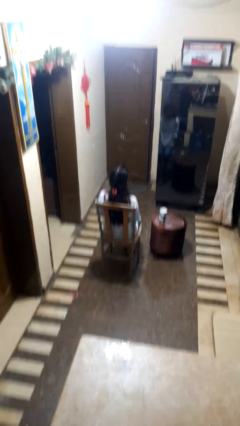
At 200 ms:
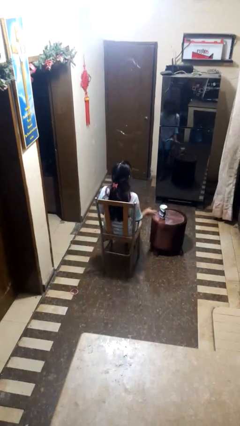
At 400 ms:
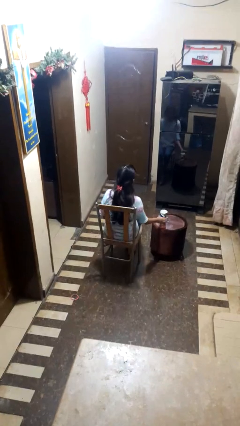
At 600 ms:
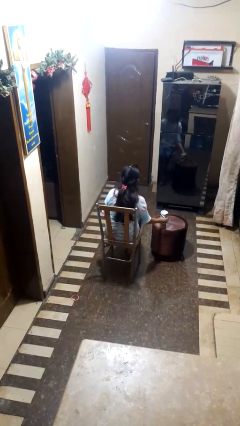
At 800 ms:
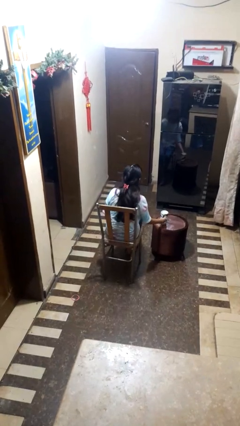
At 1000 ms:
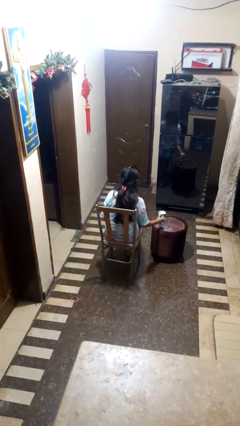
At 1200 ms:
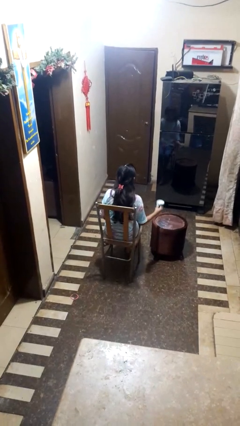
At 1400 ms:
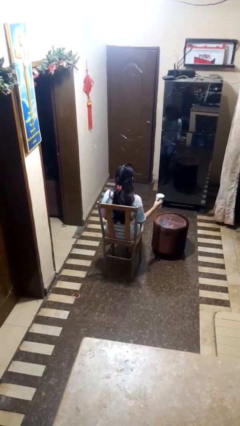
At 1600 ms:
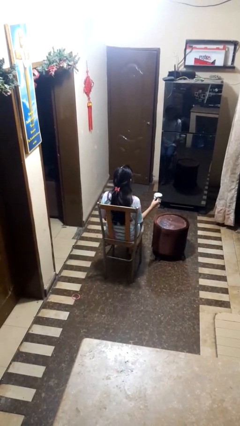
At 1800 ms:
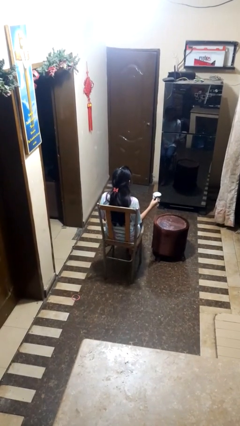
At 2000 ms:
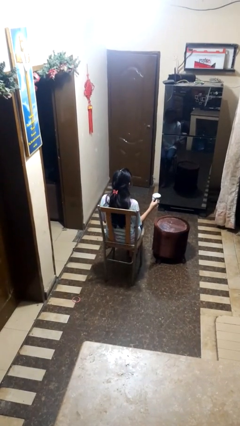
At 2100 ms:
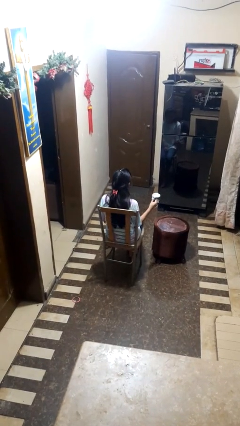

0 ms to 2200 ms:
person picks up object from table

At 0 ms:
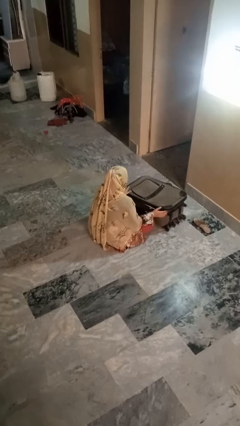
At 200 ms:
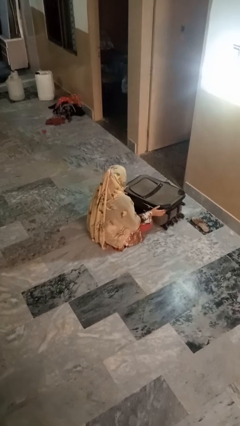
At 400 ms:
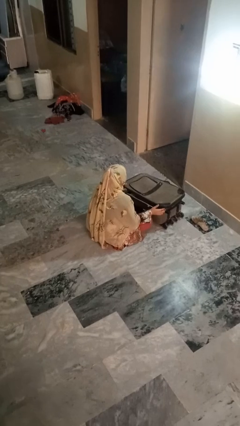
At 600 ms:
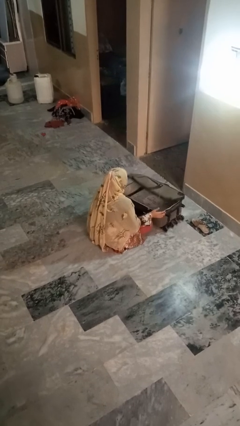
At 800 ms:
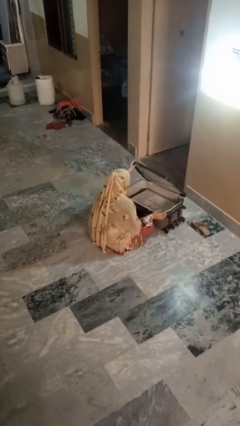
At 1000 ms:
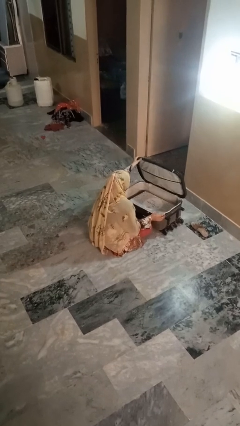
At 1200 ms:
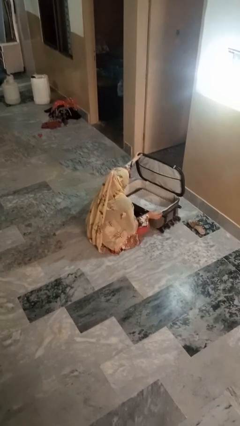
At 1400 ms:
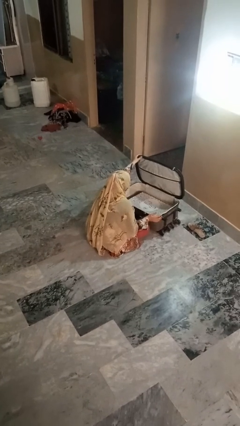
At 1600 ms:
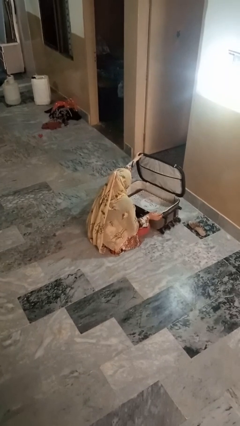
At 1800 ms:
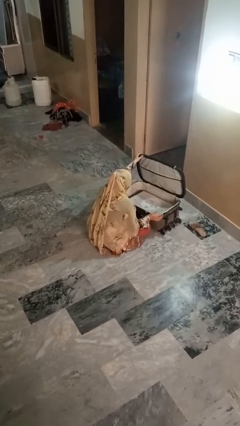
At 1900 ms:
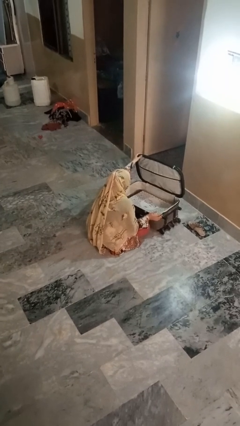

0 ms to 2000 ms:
person opens suitcase

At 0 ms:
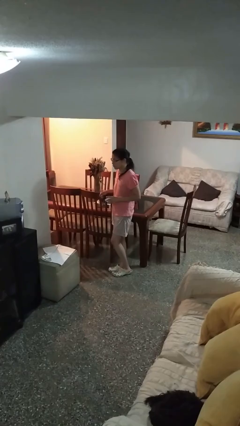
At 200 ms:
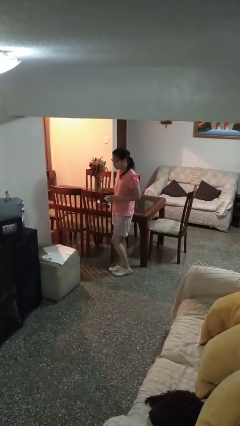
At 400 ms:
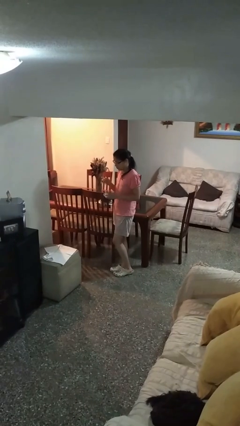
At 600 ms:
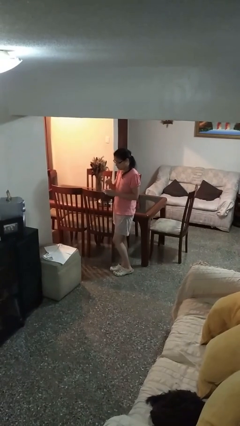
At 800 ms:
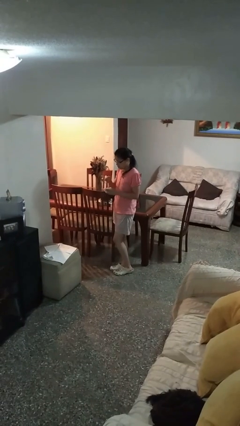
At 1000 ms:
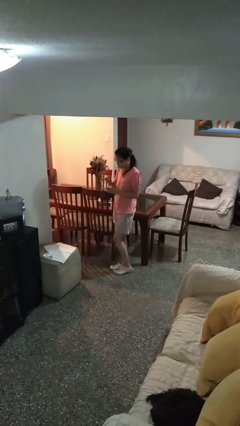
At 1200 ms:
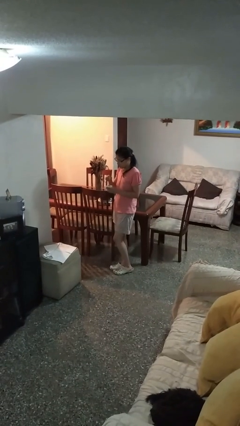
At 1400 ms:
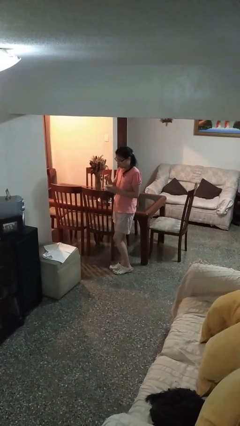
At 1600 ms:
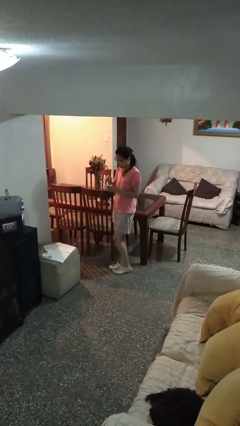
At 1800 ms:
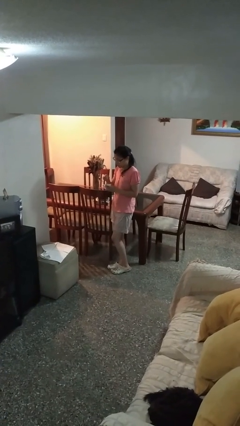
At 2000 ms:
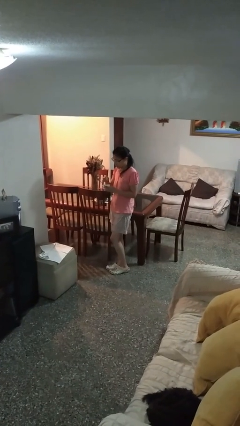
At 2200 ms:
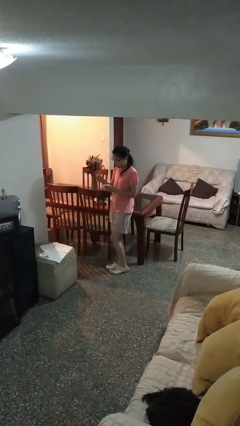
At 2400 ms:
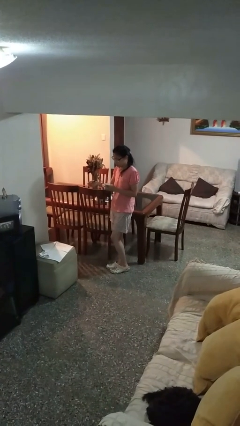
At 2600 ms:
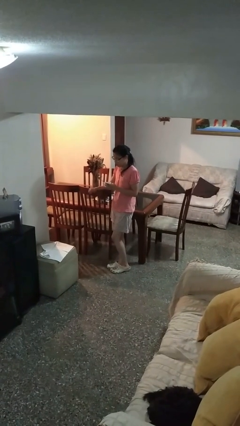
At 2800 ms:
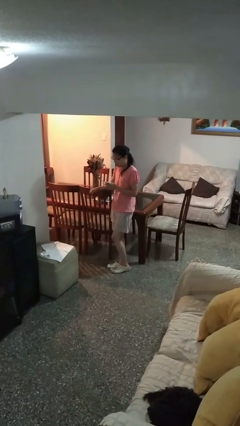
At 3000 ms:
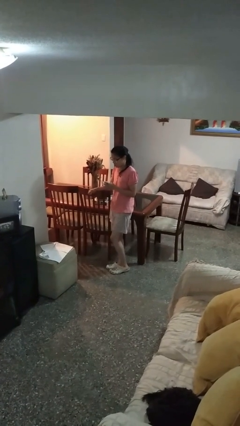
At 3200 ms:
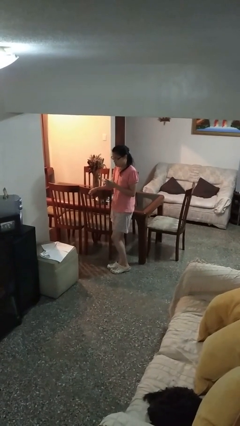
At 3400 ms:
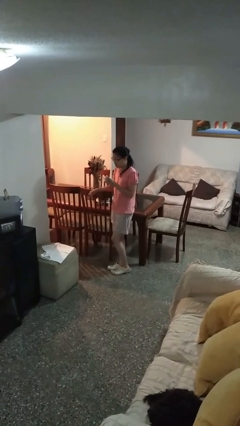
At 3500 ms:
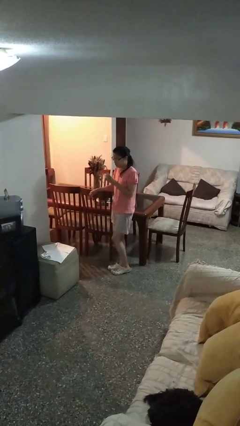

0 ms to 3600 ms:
person stirs mug

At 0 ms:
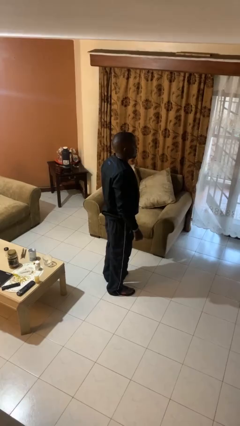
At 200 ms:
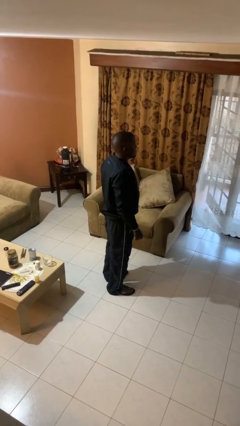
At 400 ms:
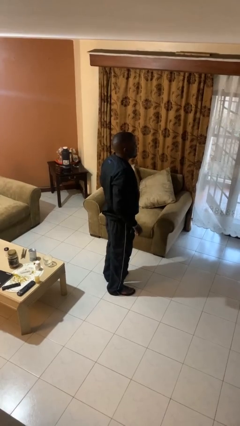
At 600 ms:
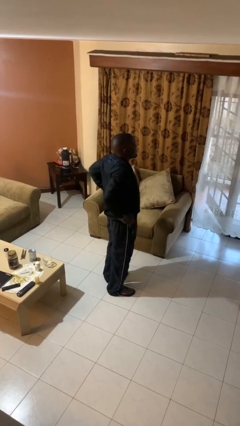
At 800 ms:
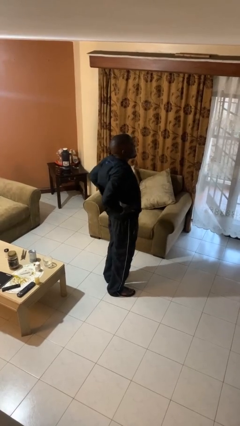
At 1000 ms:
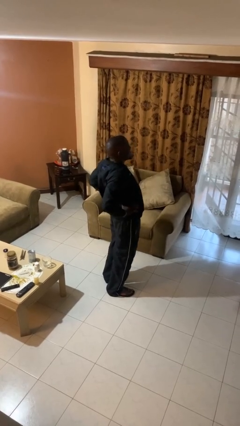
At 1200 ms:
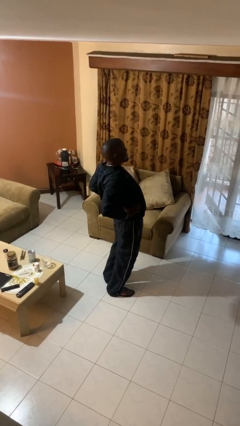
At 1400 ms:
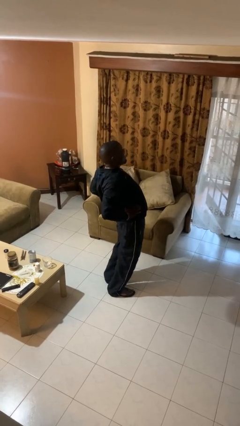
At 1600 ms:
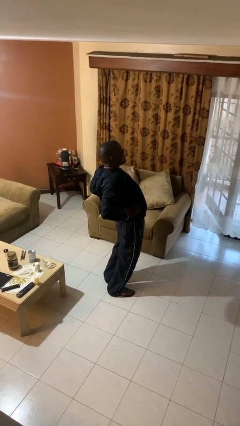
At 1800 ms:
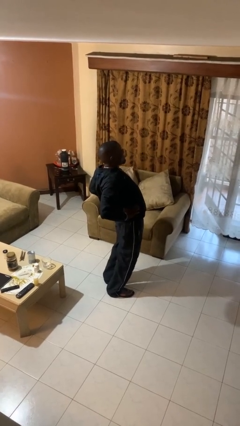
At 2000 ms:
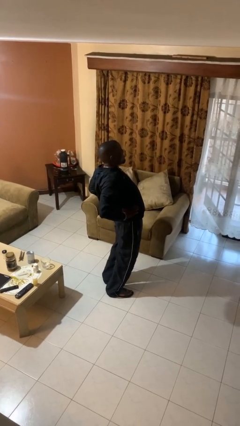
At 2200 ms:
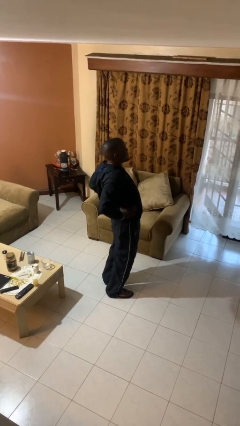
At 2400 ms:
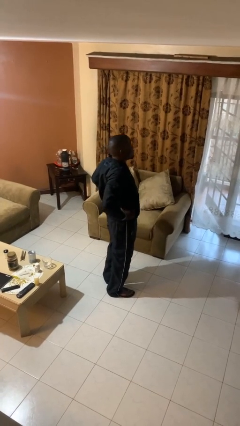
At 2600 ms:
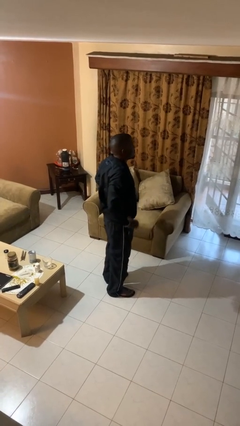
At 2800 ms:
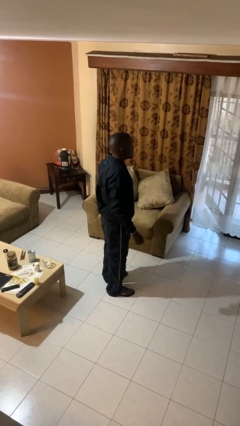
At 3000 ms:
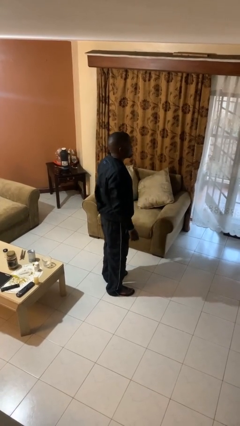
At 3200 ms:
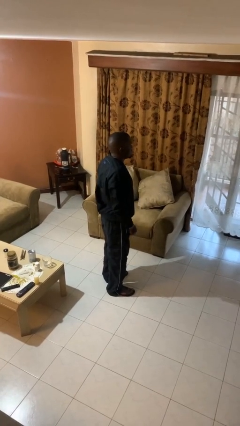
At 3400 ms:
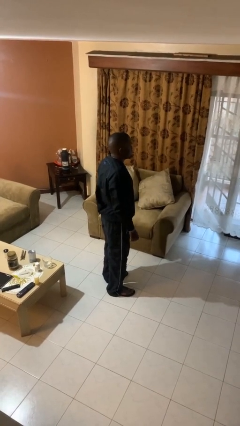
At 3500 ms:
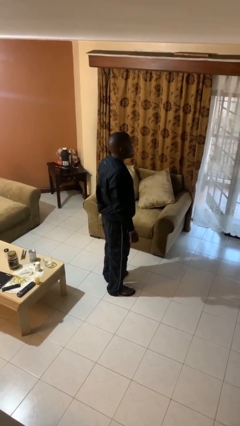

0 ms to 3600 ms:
person stretches back

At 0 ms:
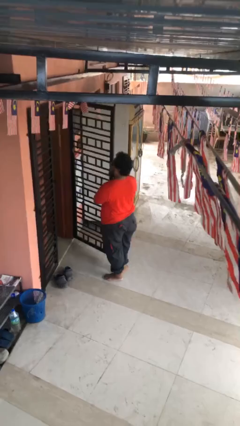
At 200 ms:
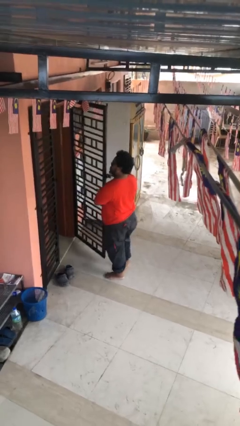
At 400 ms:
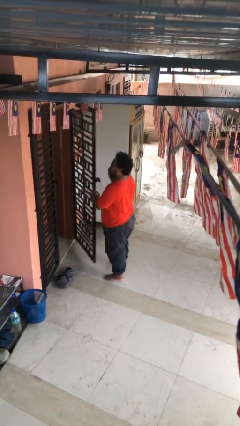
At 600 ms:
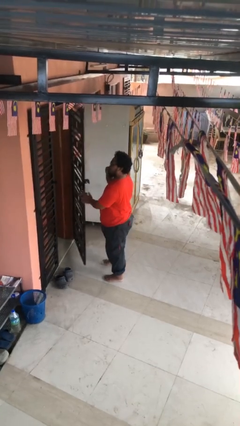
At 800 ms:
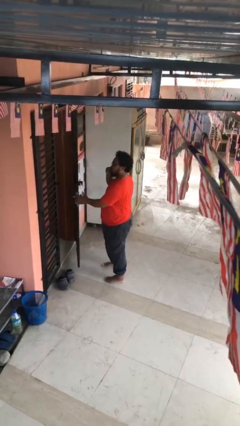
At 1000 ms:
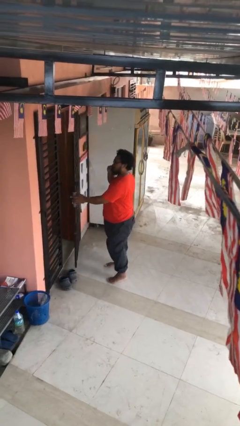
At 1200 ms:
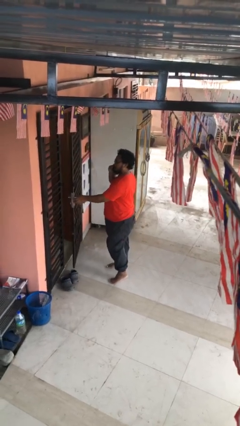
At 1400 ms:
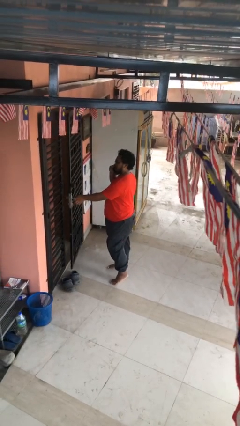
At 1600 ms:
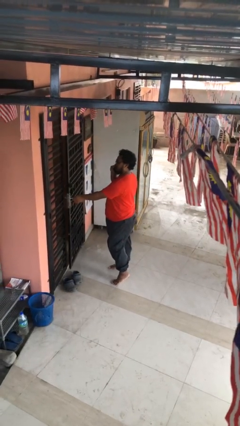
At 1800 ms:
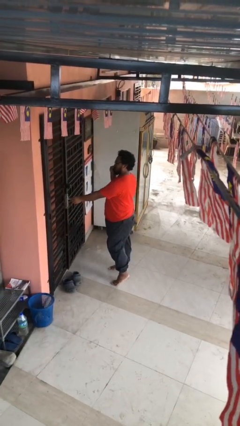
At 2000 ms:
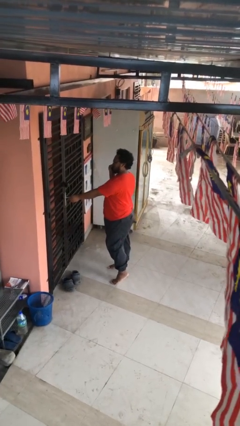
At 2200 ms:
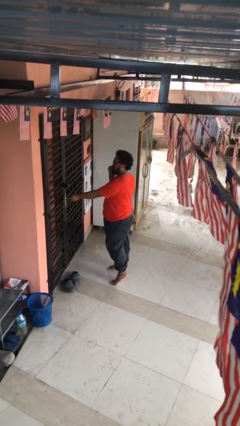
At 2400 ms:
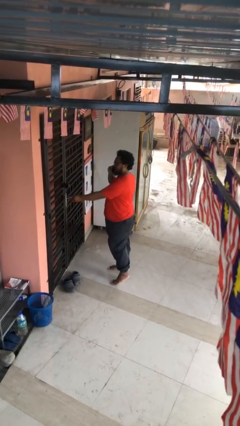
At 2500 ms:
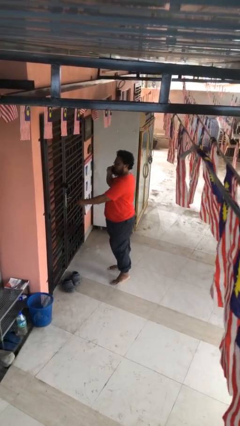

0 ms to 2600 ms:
person closes facility door

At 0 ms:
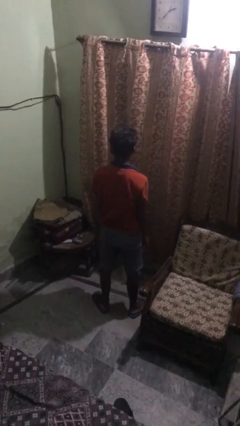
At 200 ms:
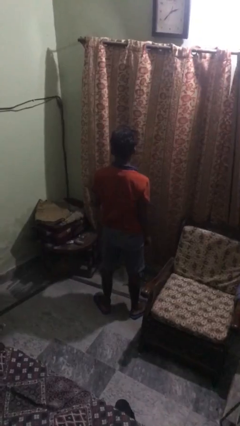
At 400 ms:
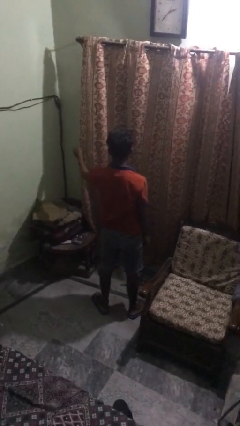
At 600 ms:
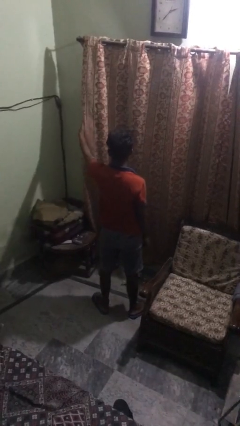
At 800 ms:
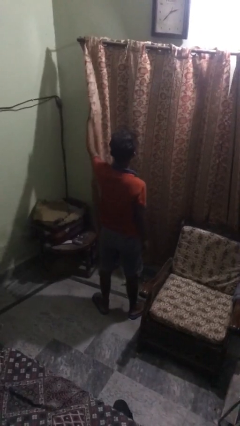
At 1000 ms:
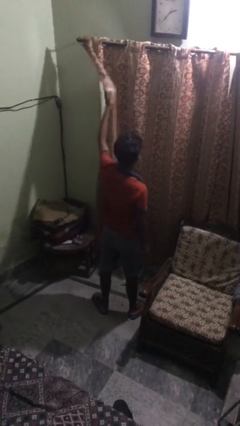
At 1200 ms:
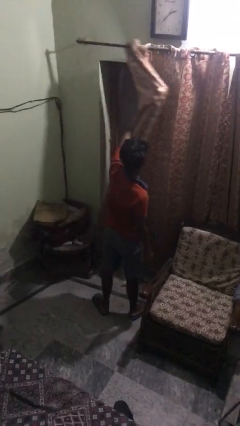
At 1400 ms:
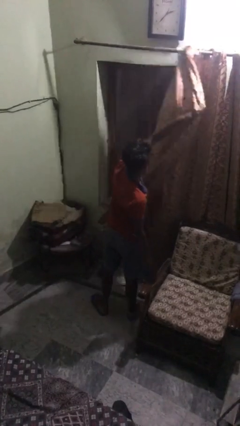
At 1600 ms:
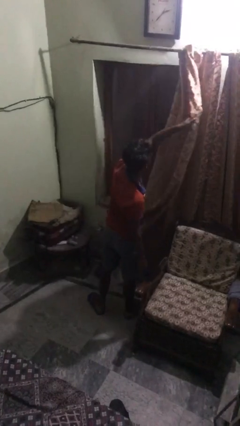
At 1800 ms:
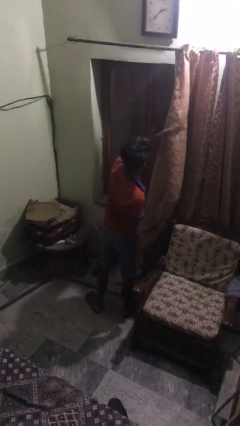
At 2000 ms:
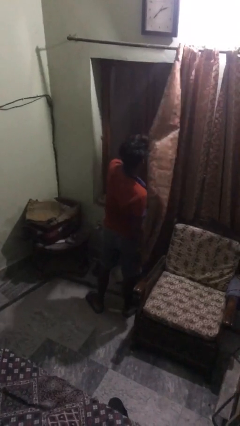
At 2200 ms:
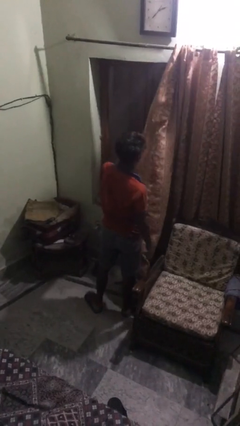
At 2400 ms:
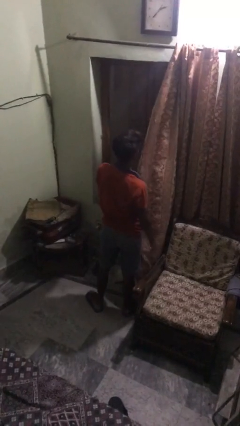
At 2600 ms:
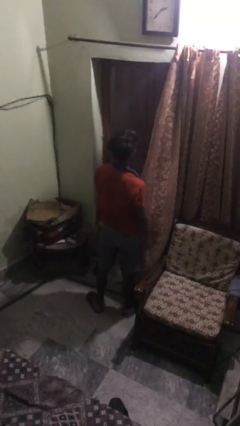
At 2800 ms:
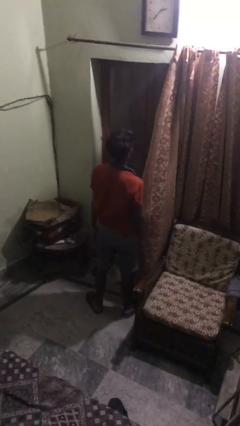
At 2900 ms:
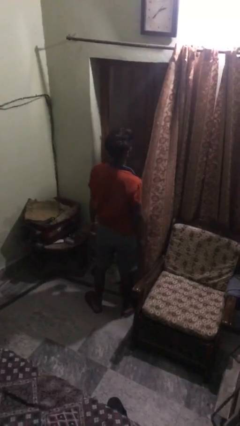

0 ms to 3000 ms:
person opens curtains

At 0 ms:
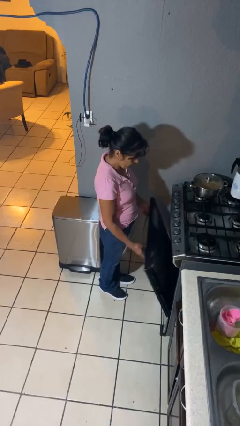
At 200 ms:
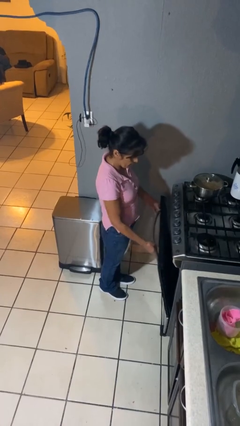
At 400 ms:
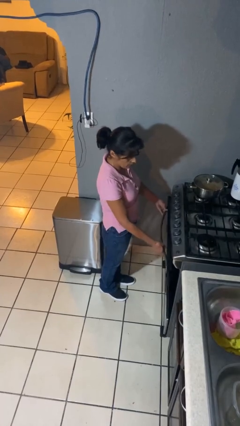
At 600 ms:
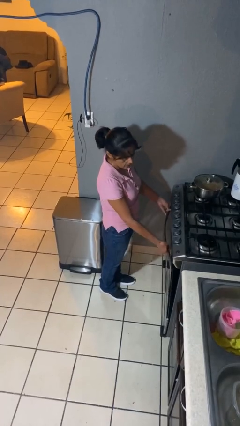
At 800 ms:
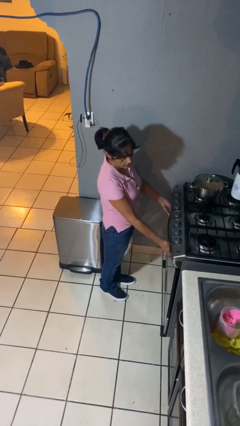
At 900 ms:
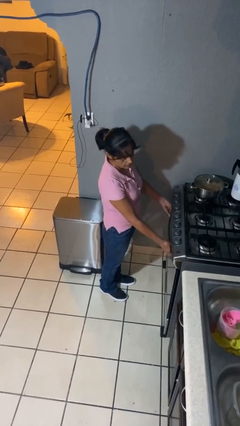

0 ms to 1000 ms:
person closes oven door
